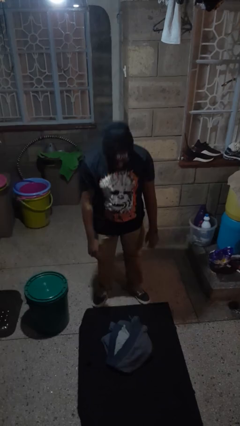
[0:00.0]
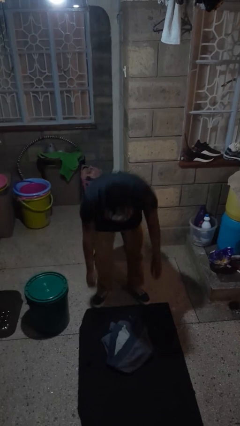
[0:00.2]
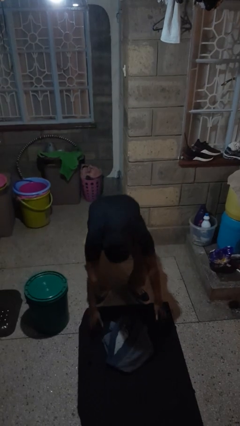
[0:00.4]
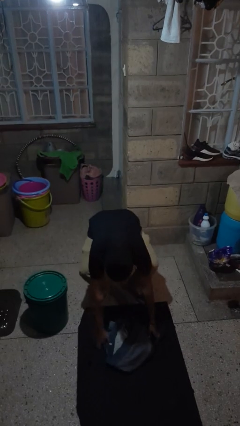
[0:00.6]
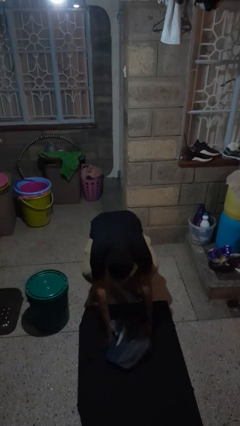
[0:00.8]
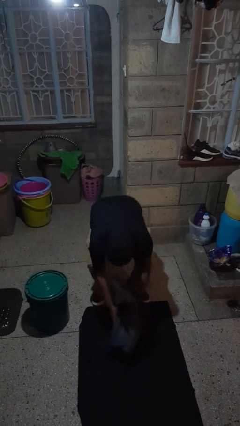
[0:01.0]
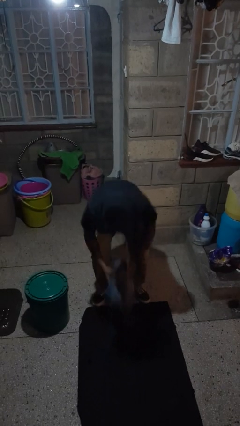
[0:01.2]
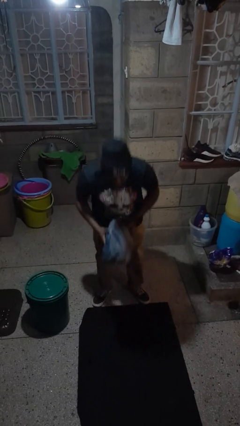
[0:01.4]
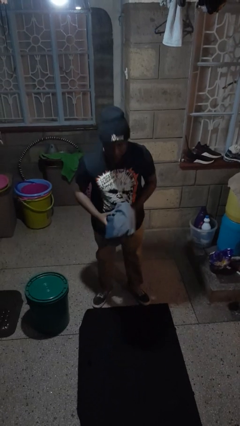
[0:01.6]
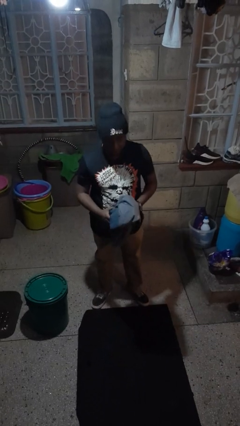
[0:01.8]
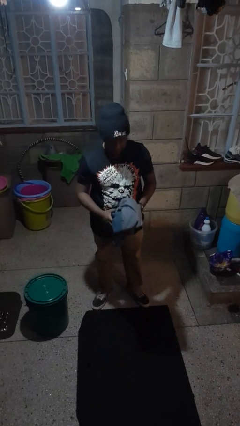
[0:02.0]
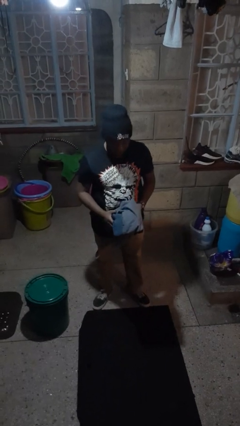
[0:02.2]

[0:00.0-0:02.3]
person picks up object from floor

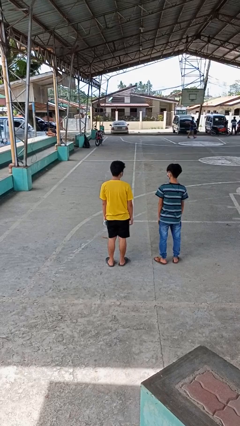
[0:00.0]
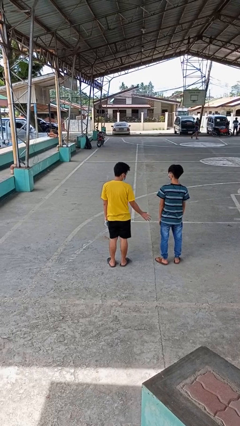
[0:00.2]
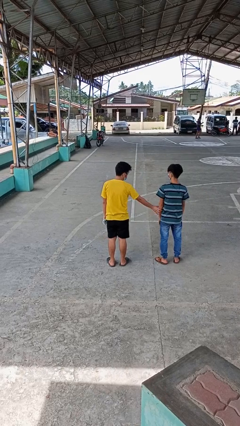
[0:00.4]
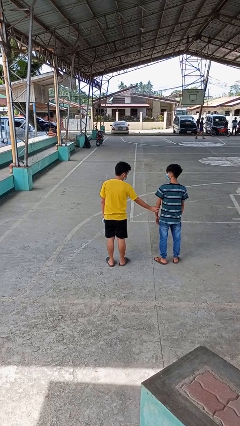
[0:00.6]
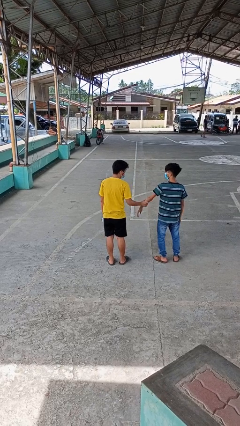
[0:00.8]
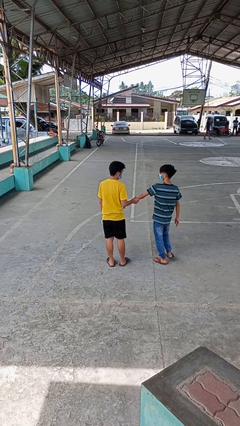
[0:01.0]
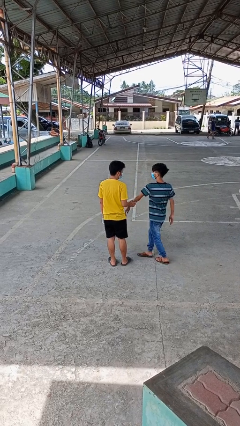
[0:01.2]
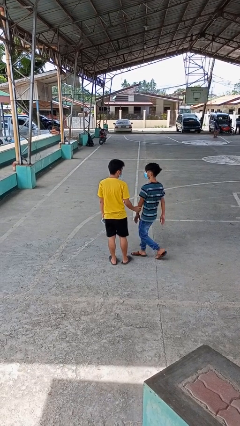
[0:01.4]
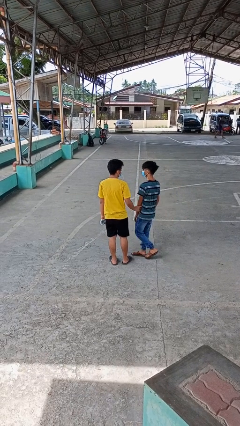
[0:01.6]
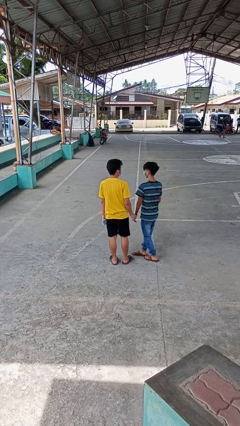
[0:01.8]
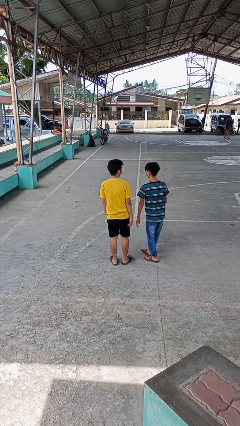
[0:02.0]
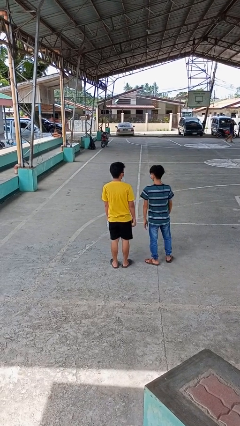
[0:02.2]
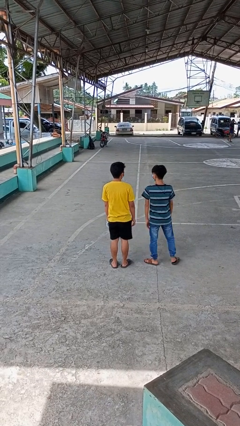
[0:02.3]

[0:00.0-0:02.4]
person grabs person by forearm

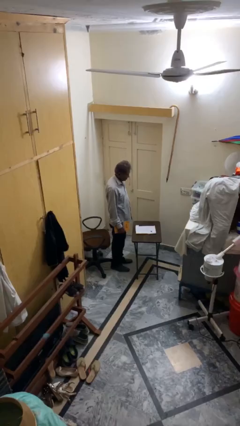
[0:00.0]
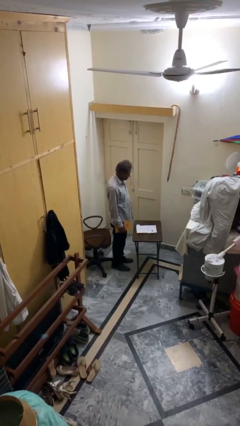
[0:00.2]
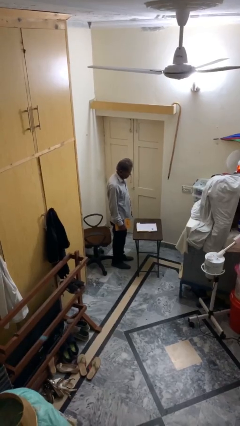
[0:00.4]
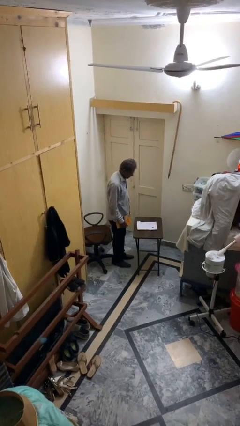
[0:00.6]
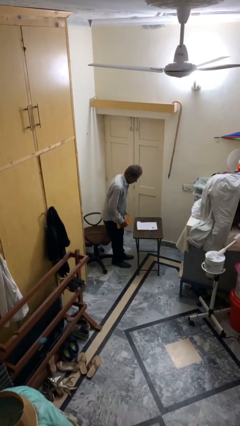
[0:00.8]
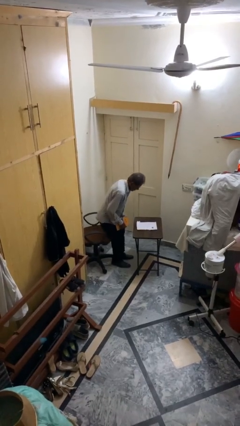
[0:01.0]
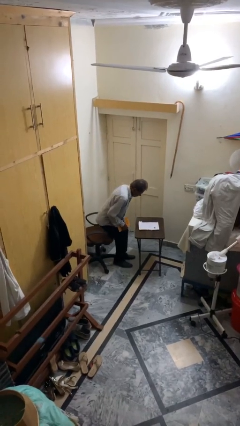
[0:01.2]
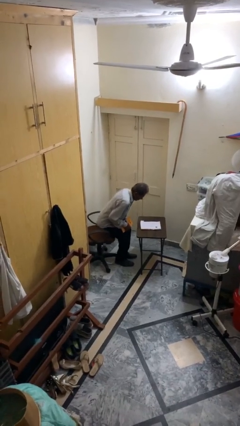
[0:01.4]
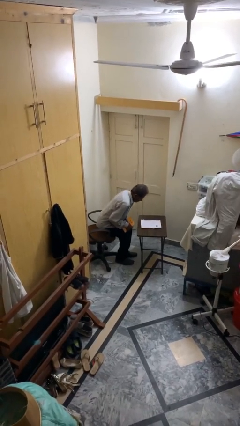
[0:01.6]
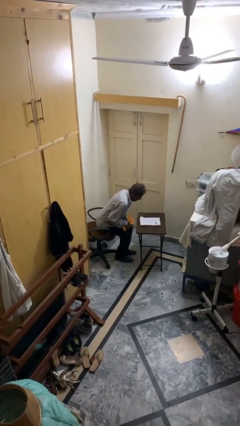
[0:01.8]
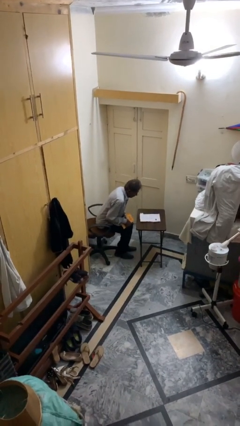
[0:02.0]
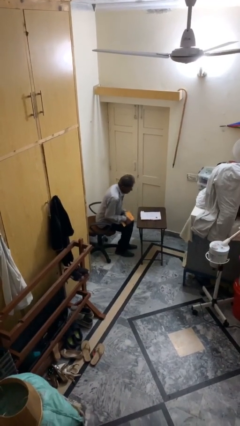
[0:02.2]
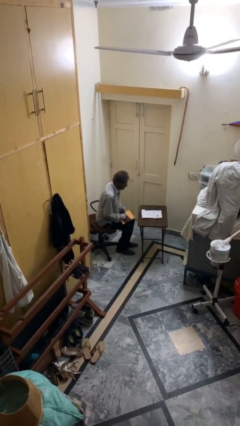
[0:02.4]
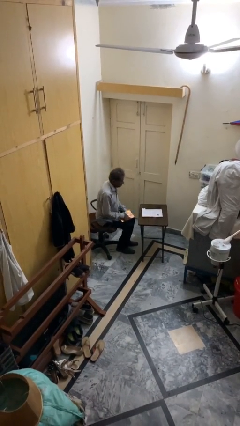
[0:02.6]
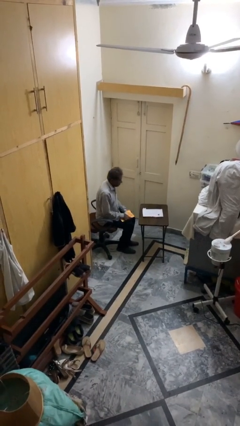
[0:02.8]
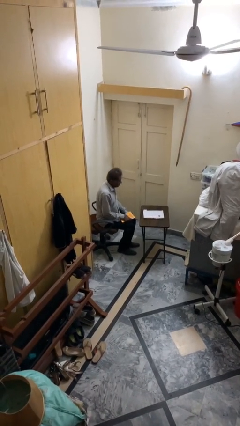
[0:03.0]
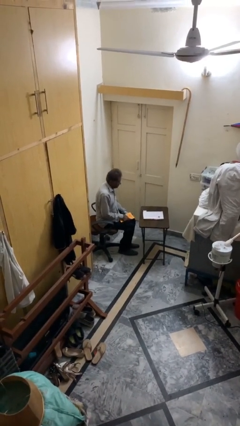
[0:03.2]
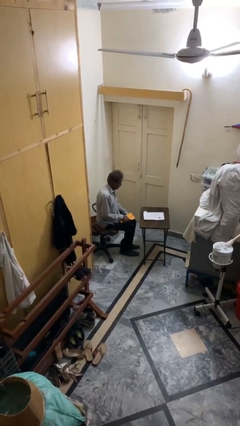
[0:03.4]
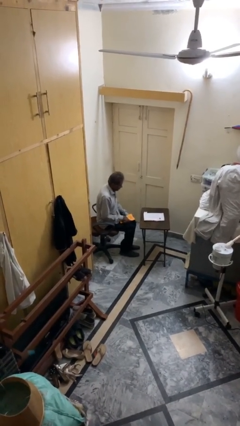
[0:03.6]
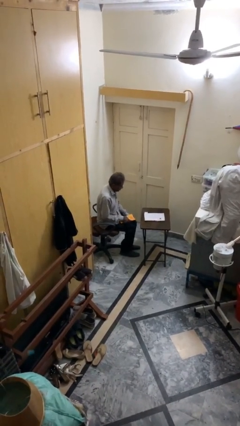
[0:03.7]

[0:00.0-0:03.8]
person sits down

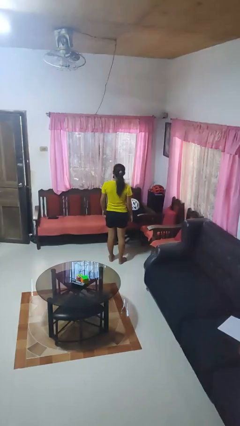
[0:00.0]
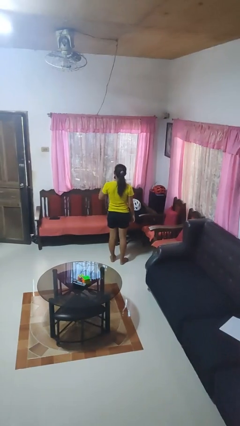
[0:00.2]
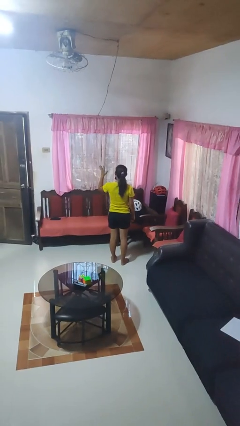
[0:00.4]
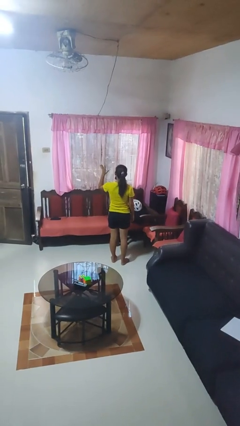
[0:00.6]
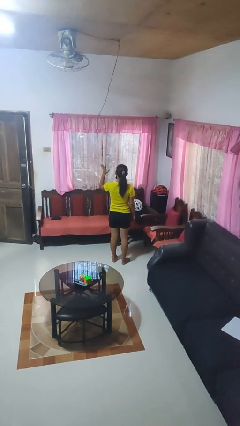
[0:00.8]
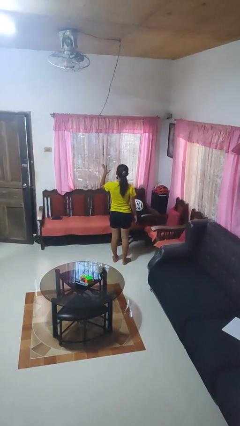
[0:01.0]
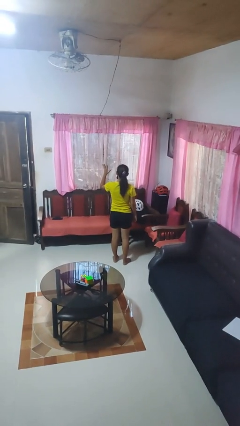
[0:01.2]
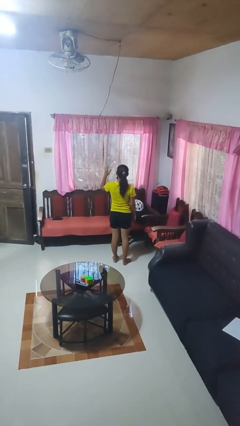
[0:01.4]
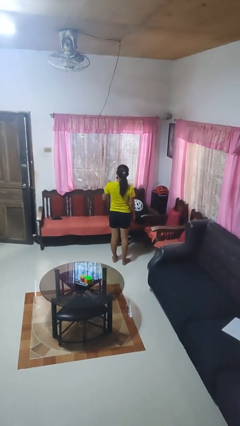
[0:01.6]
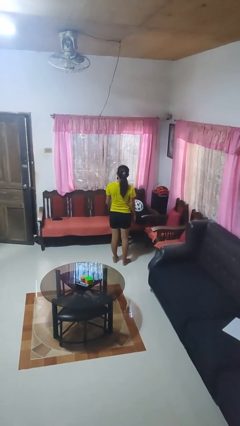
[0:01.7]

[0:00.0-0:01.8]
person gestures number five

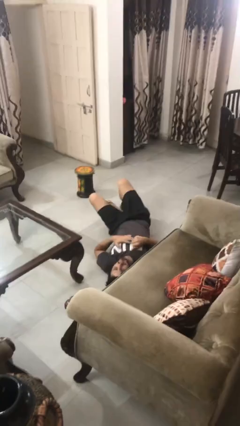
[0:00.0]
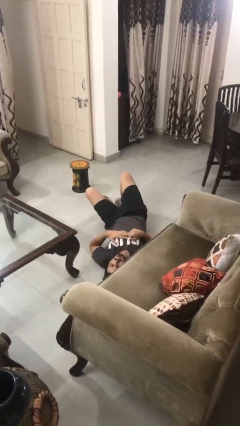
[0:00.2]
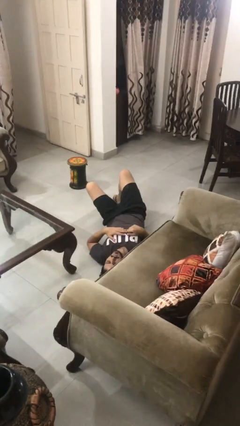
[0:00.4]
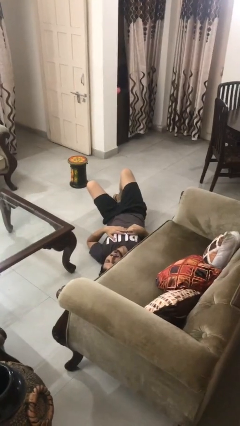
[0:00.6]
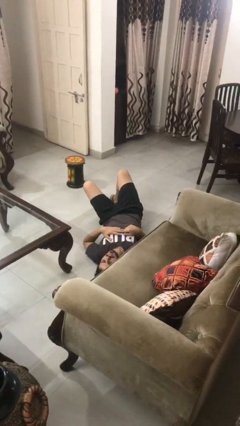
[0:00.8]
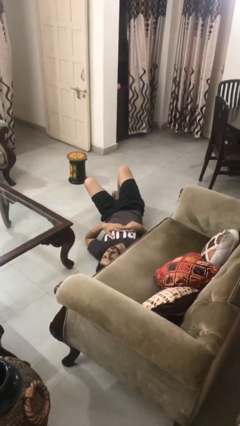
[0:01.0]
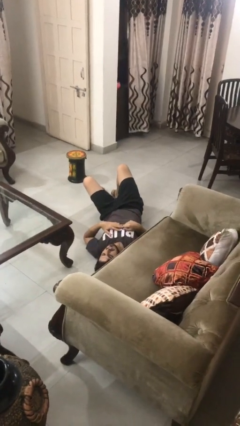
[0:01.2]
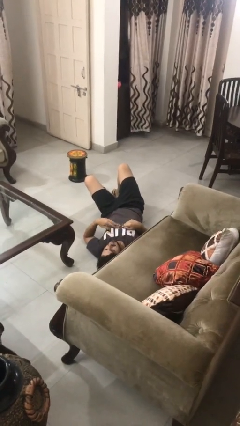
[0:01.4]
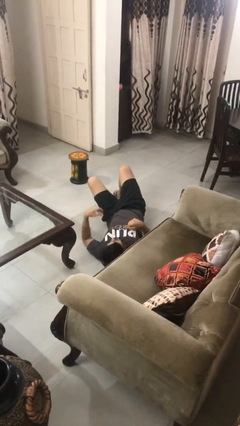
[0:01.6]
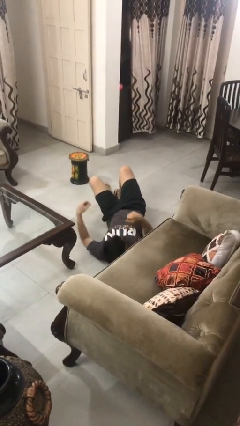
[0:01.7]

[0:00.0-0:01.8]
person lies down on floor

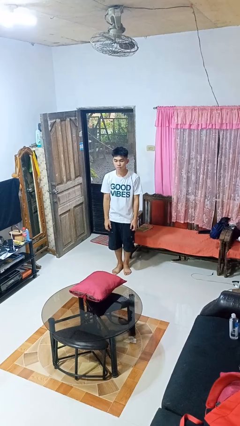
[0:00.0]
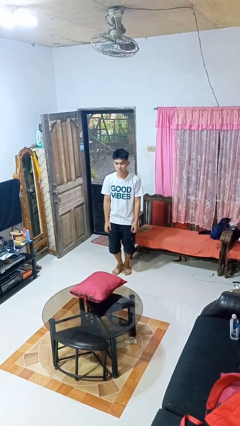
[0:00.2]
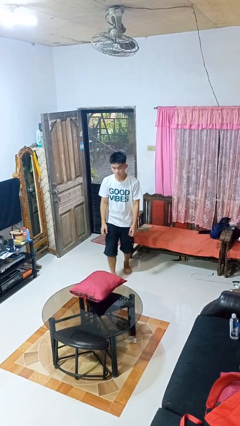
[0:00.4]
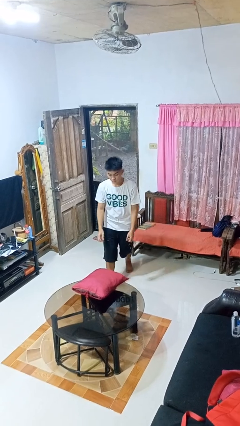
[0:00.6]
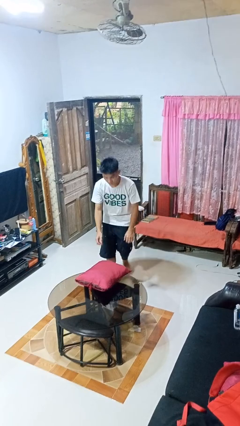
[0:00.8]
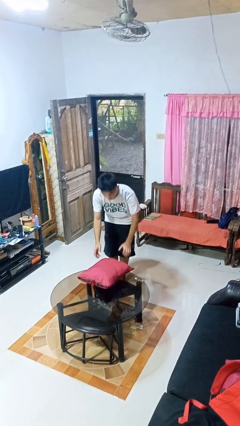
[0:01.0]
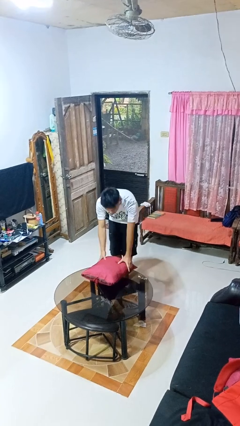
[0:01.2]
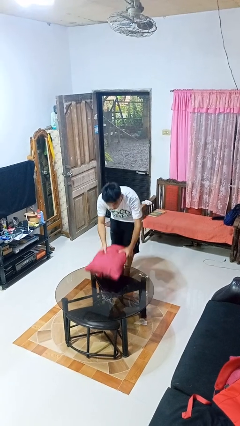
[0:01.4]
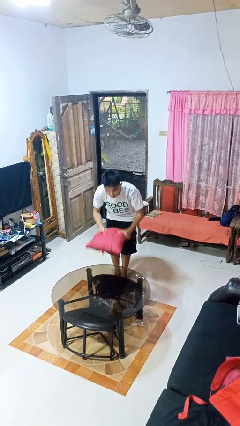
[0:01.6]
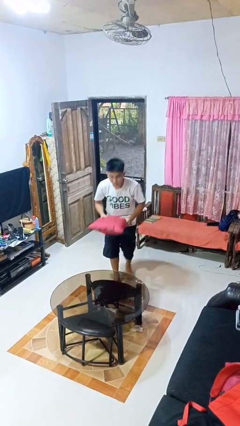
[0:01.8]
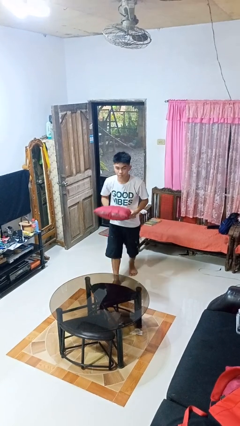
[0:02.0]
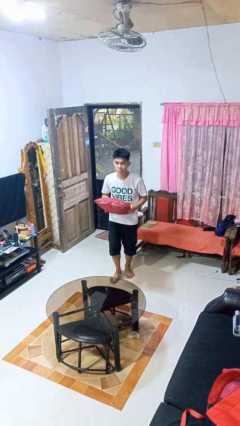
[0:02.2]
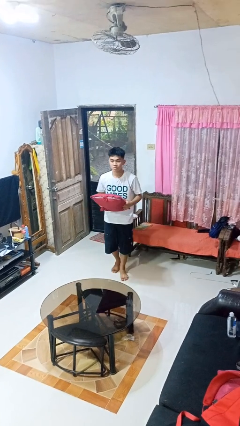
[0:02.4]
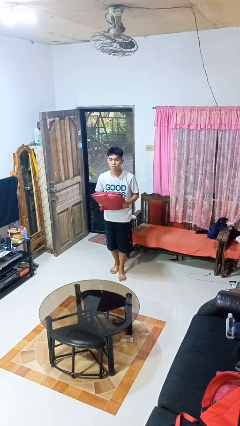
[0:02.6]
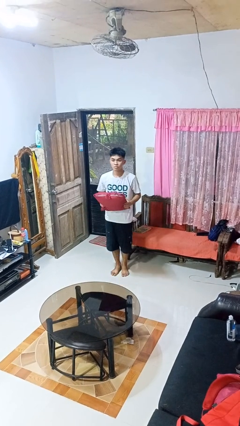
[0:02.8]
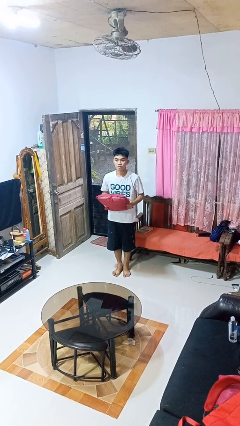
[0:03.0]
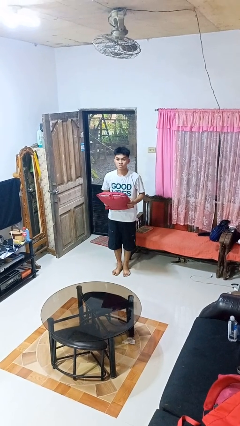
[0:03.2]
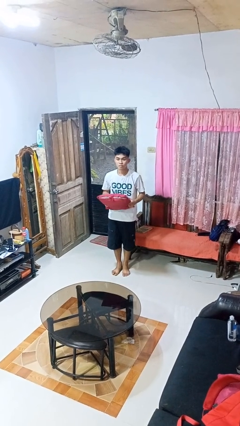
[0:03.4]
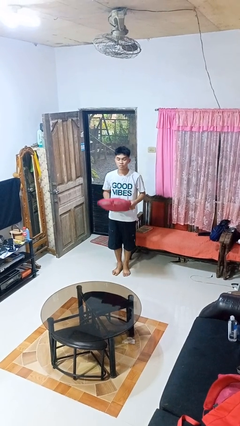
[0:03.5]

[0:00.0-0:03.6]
person picks up object from table

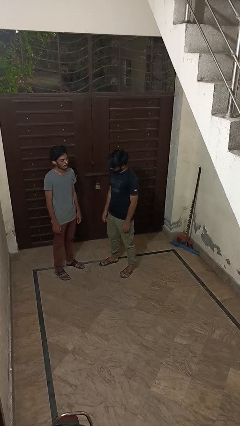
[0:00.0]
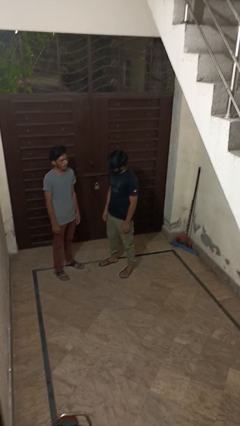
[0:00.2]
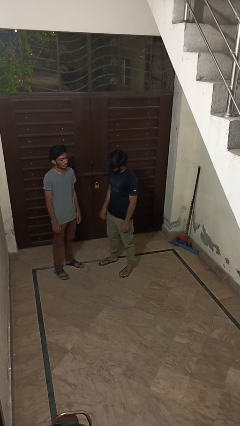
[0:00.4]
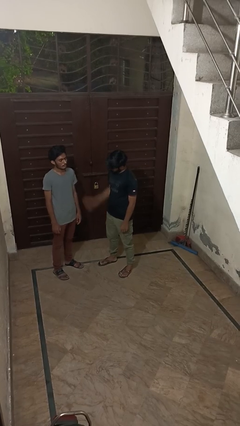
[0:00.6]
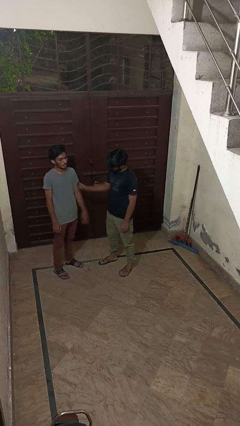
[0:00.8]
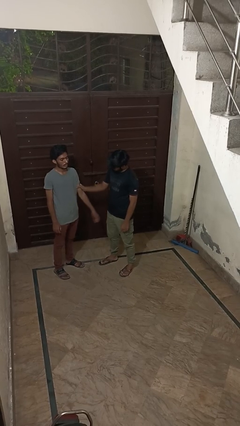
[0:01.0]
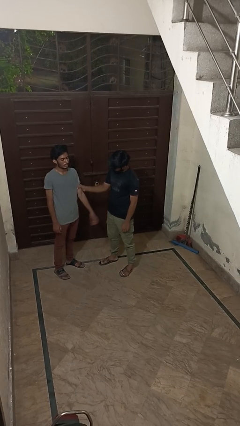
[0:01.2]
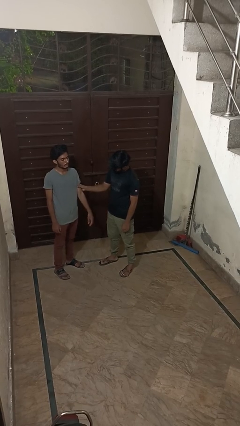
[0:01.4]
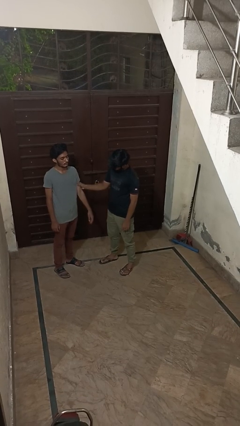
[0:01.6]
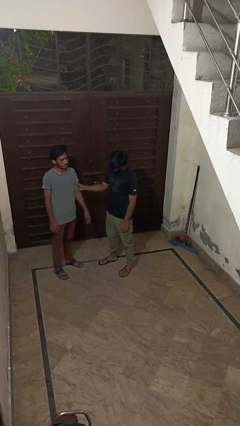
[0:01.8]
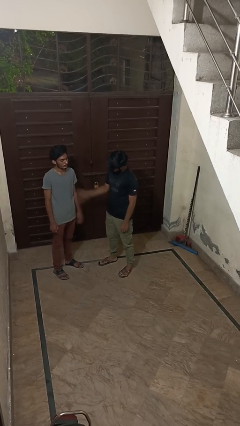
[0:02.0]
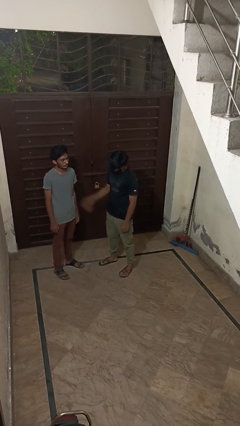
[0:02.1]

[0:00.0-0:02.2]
person grabs person by bicep
